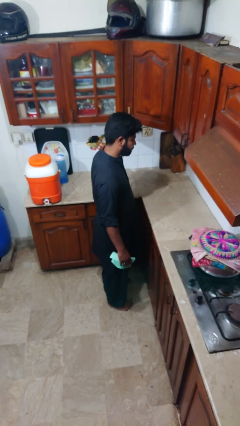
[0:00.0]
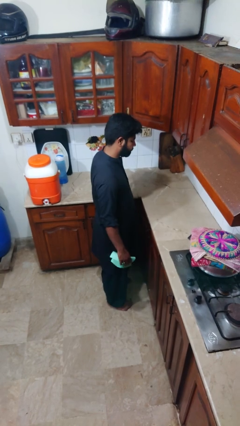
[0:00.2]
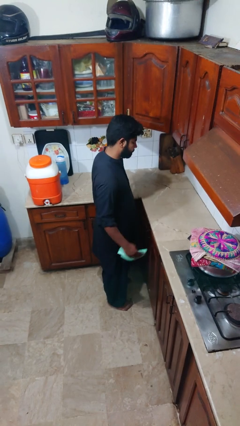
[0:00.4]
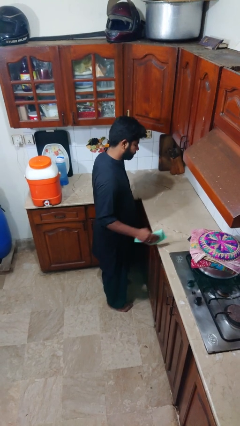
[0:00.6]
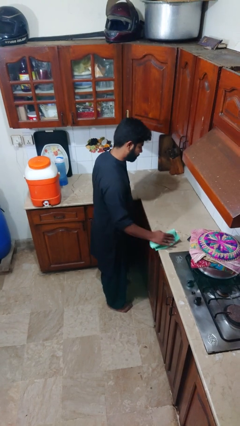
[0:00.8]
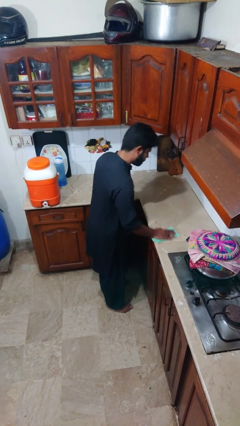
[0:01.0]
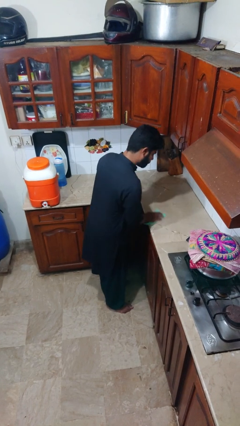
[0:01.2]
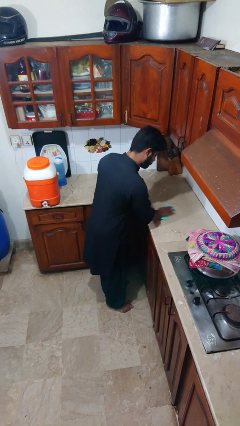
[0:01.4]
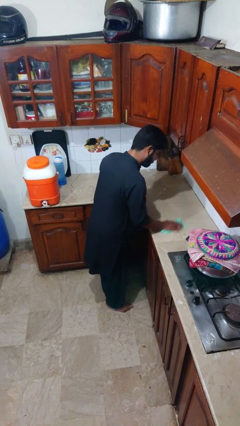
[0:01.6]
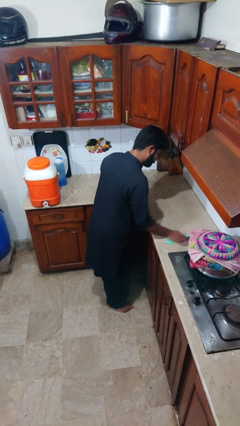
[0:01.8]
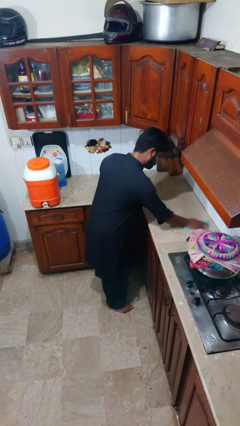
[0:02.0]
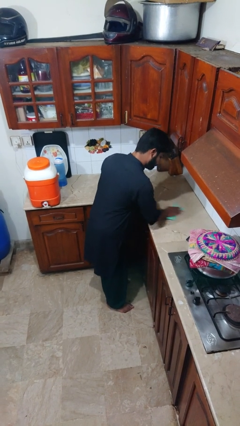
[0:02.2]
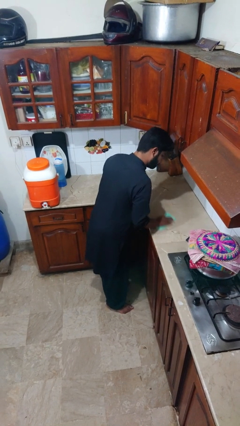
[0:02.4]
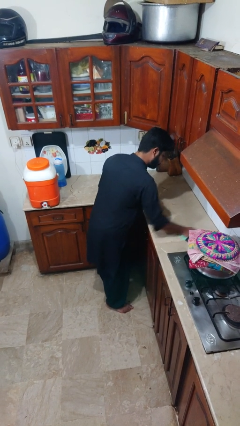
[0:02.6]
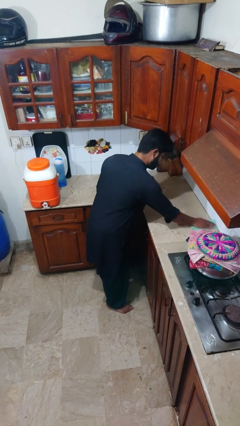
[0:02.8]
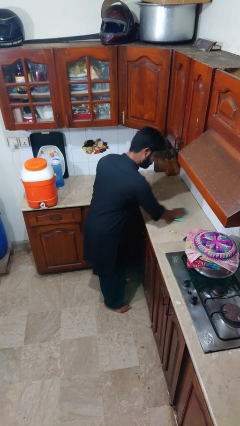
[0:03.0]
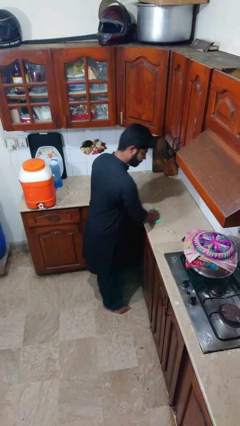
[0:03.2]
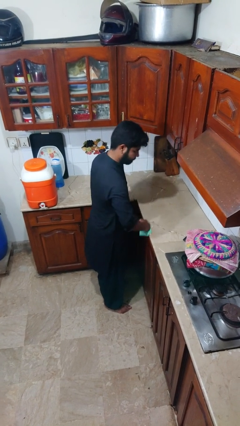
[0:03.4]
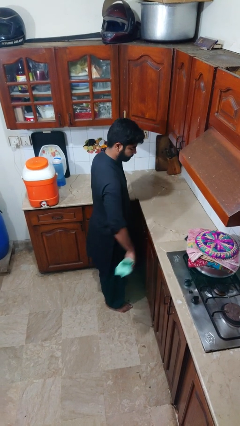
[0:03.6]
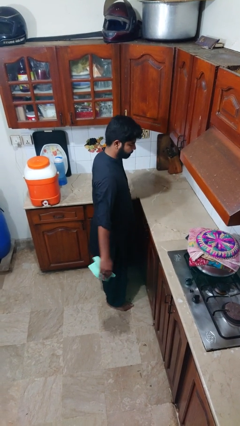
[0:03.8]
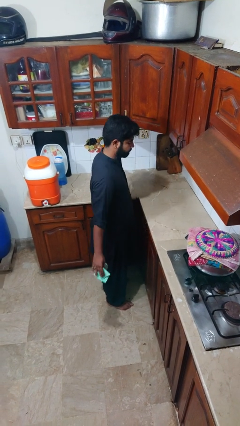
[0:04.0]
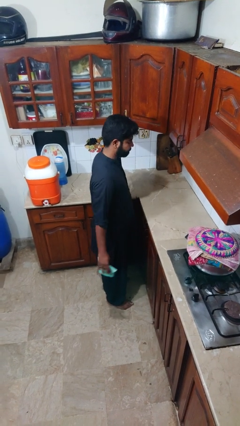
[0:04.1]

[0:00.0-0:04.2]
person cleans table with rag

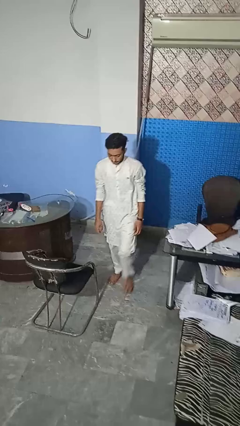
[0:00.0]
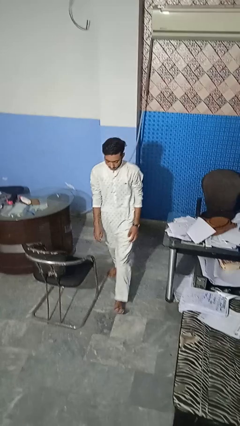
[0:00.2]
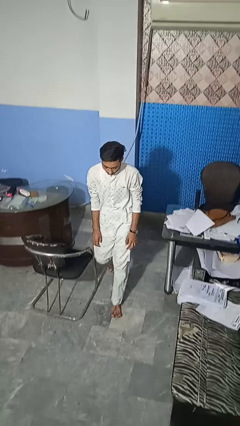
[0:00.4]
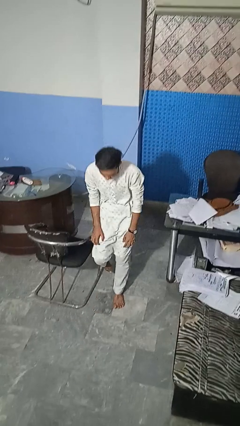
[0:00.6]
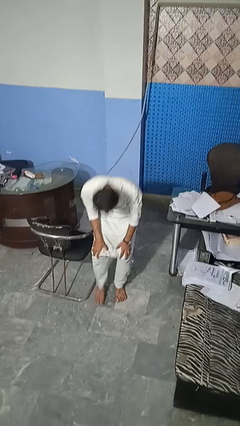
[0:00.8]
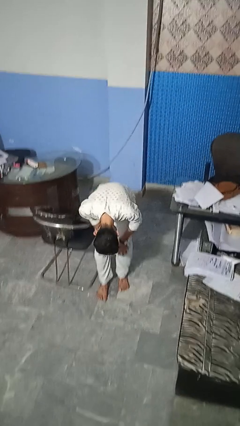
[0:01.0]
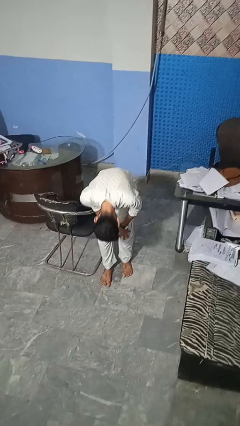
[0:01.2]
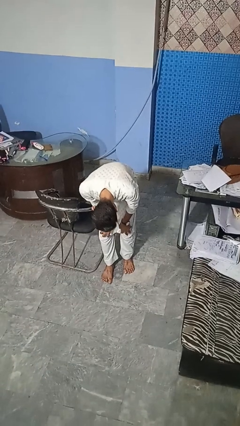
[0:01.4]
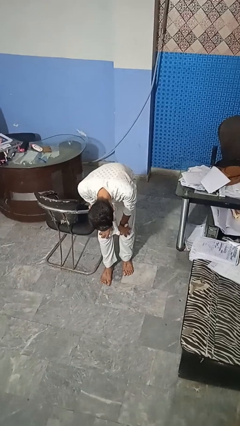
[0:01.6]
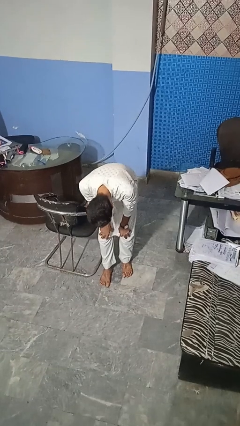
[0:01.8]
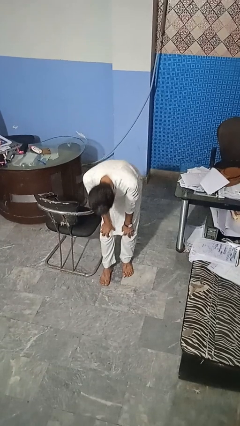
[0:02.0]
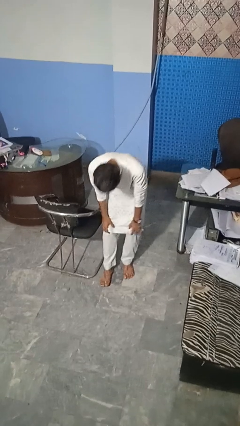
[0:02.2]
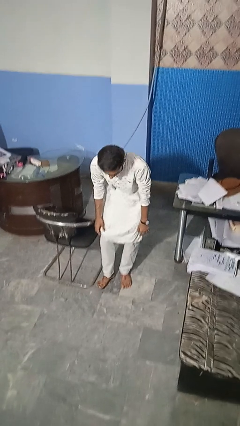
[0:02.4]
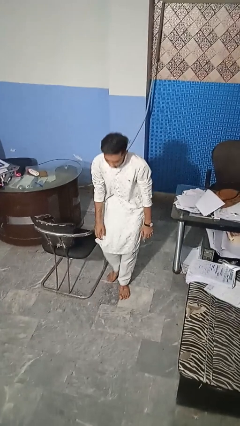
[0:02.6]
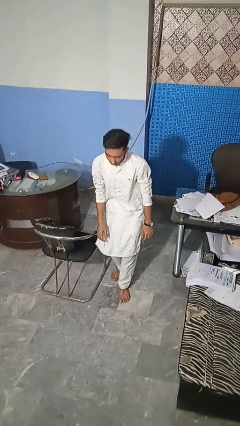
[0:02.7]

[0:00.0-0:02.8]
person stubs toe

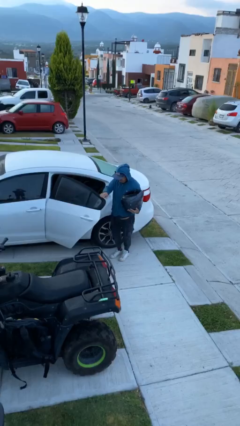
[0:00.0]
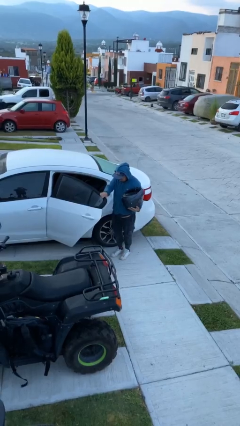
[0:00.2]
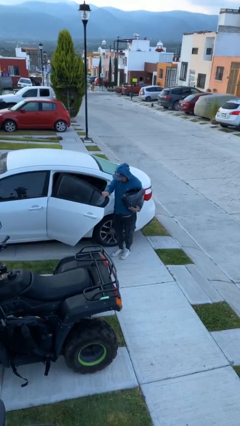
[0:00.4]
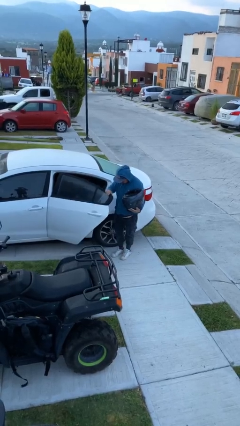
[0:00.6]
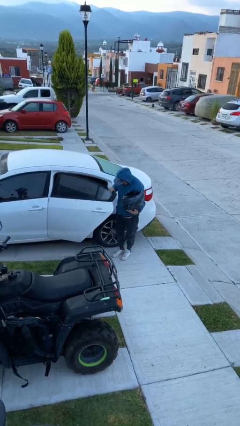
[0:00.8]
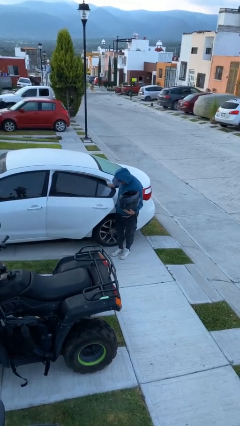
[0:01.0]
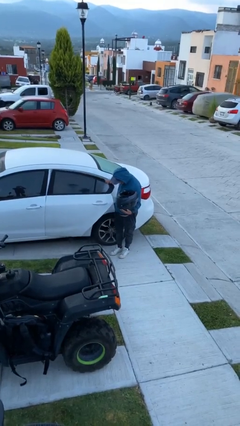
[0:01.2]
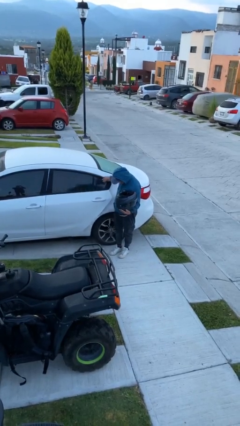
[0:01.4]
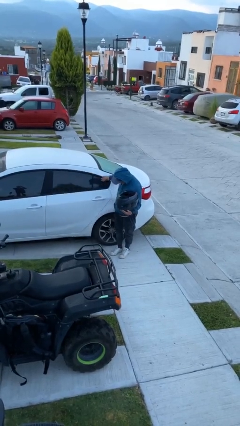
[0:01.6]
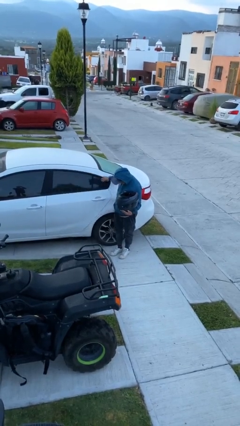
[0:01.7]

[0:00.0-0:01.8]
person closes car door

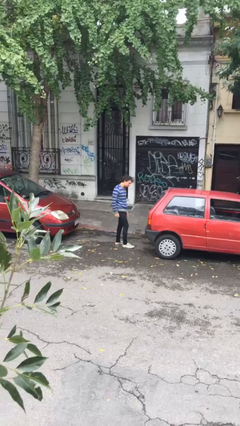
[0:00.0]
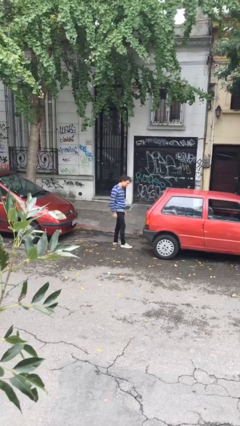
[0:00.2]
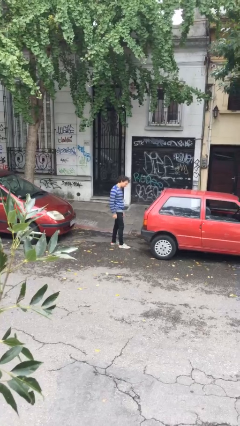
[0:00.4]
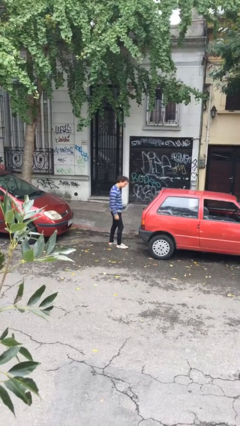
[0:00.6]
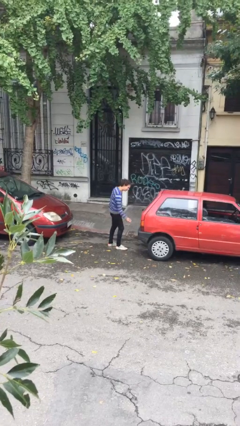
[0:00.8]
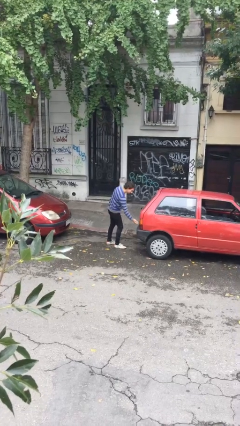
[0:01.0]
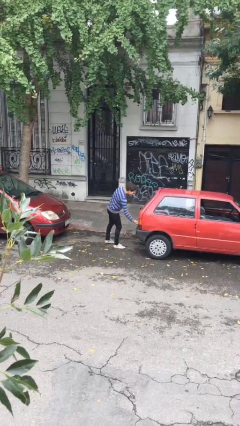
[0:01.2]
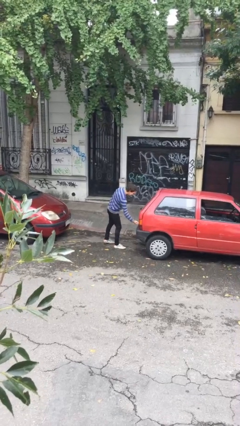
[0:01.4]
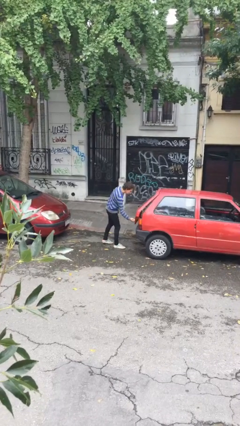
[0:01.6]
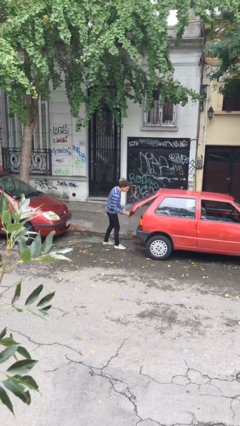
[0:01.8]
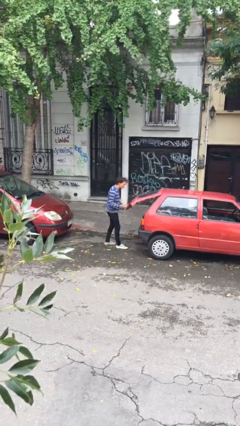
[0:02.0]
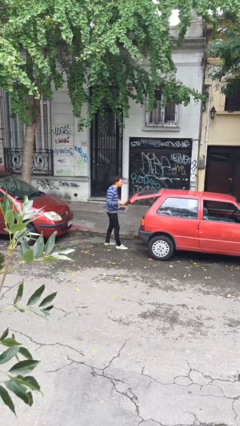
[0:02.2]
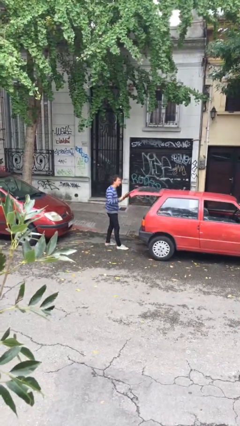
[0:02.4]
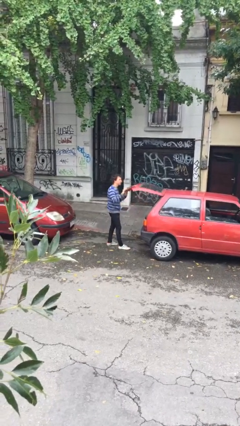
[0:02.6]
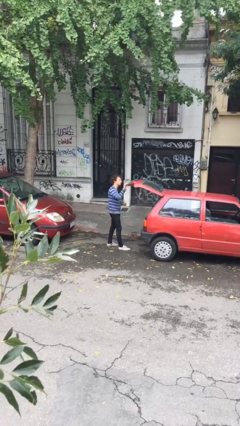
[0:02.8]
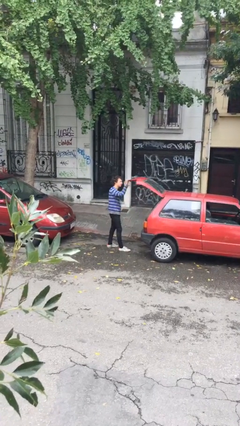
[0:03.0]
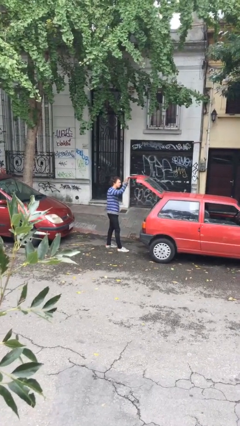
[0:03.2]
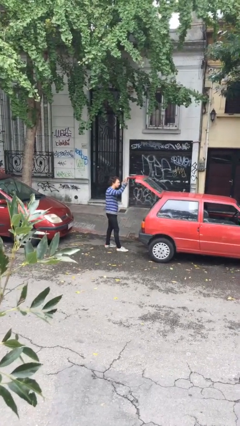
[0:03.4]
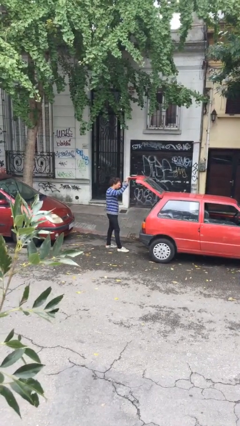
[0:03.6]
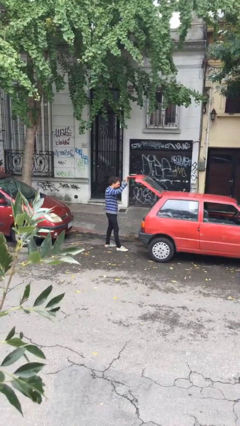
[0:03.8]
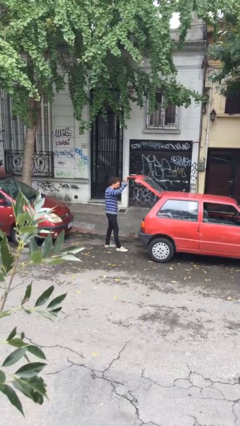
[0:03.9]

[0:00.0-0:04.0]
person opens car trunk

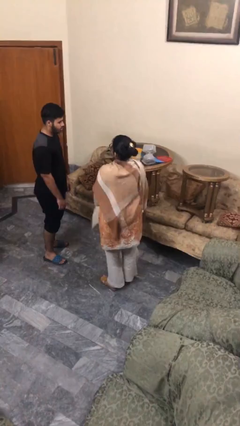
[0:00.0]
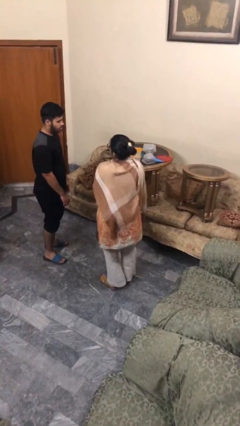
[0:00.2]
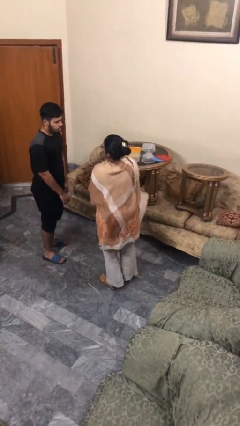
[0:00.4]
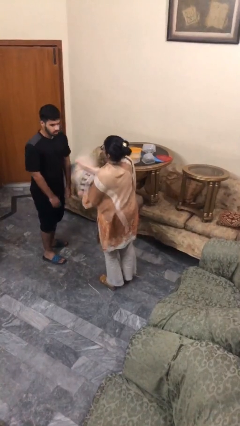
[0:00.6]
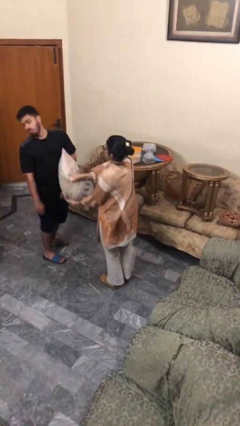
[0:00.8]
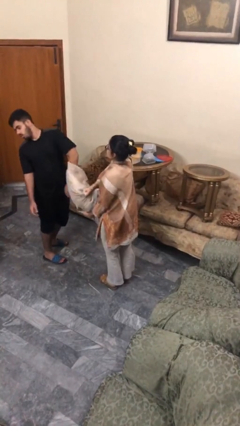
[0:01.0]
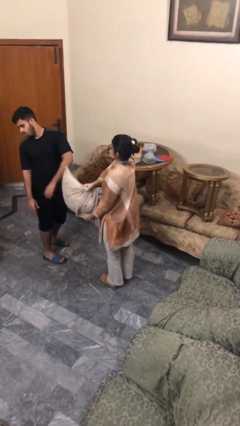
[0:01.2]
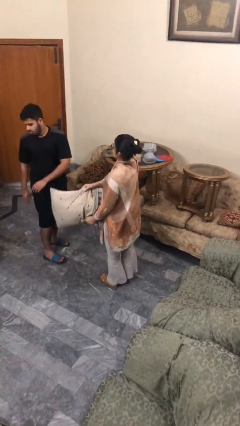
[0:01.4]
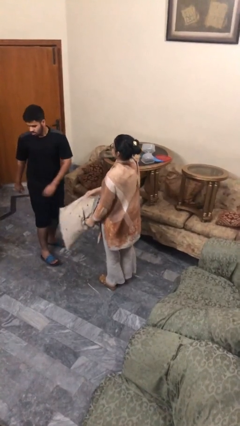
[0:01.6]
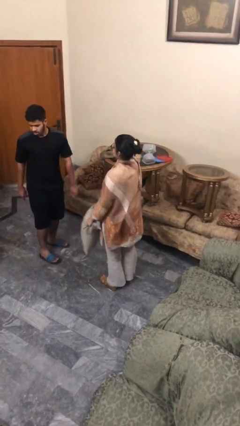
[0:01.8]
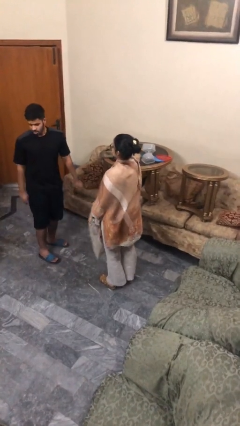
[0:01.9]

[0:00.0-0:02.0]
person hits person with pillow

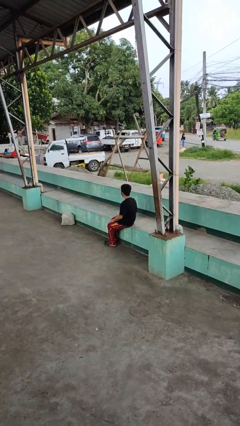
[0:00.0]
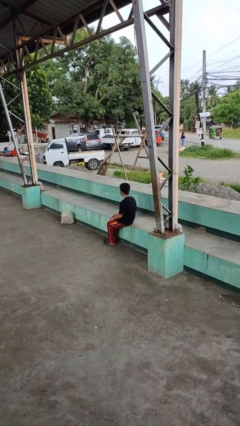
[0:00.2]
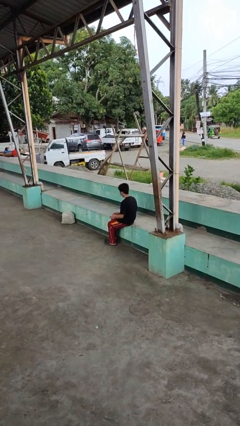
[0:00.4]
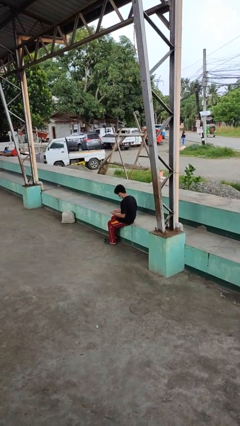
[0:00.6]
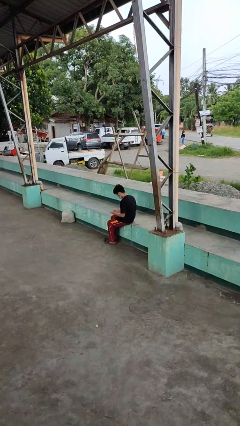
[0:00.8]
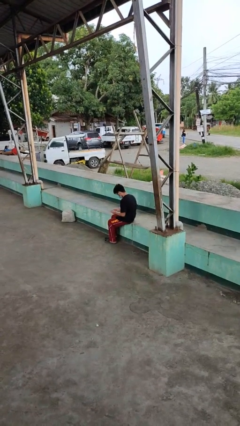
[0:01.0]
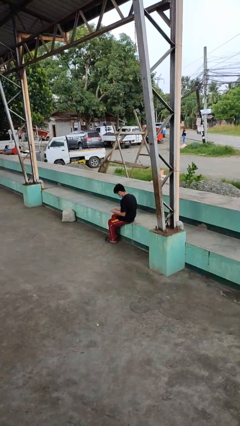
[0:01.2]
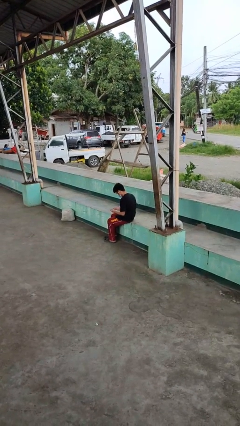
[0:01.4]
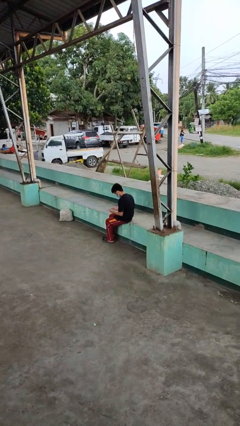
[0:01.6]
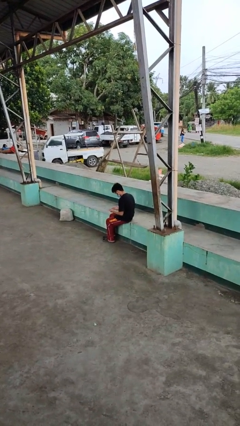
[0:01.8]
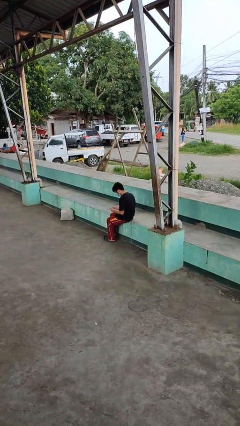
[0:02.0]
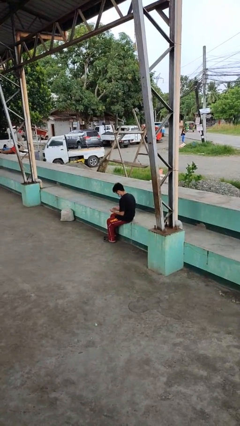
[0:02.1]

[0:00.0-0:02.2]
person looks at hands in lap

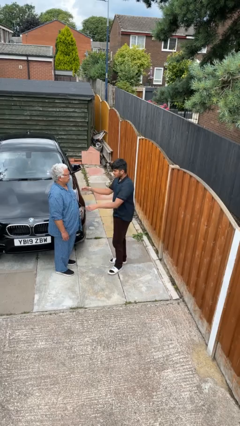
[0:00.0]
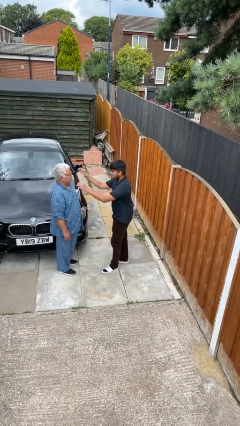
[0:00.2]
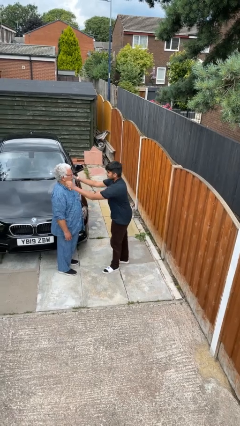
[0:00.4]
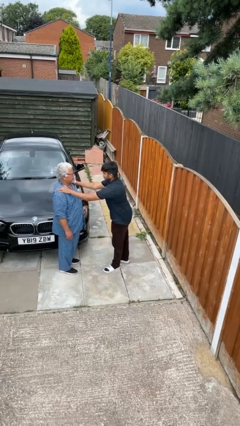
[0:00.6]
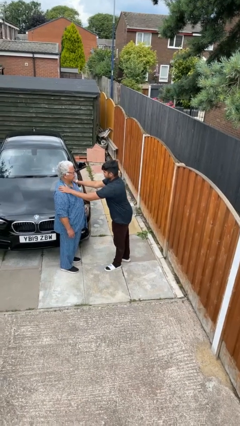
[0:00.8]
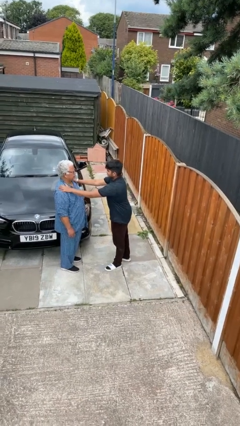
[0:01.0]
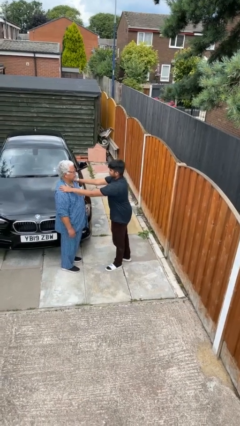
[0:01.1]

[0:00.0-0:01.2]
person pounds shoulders of person
